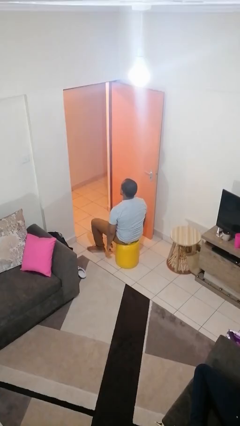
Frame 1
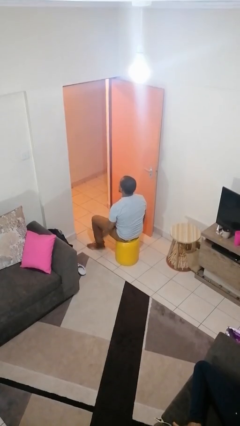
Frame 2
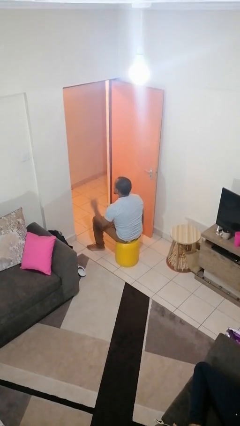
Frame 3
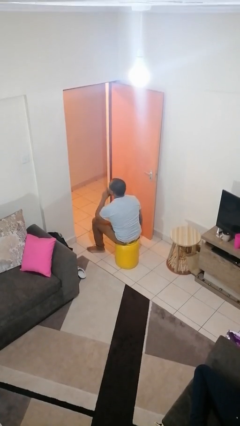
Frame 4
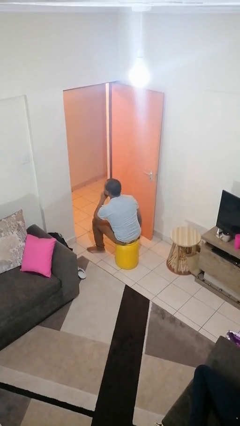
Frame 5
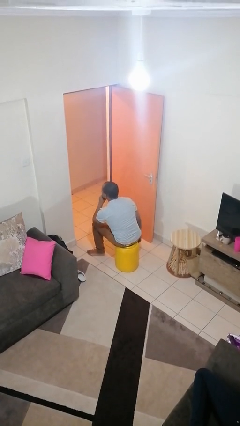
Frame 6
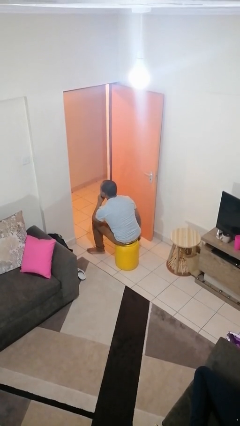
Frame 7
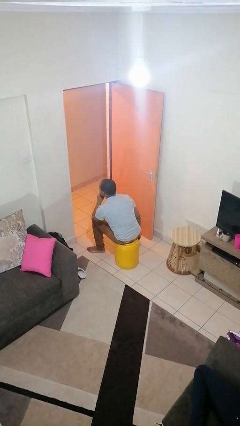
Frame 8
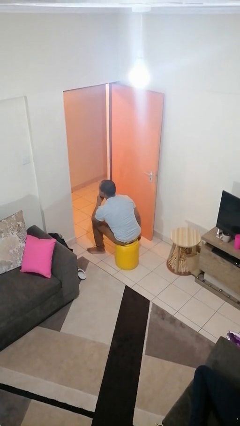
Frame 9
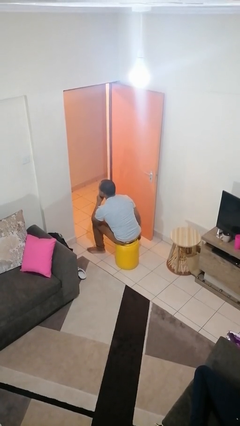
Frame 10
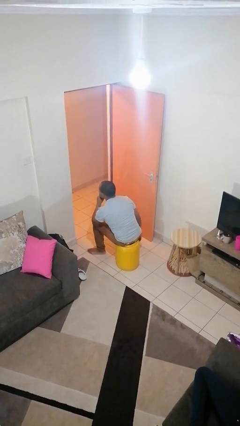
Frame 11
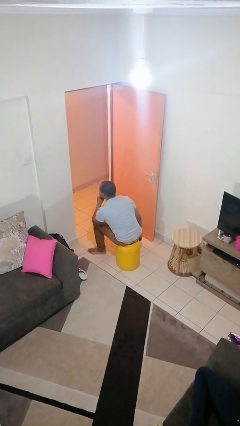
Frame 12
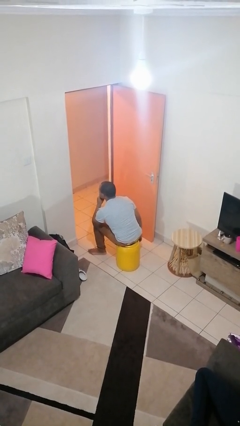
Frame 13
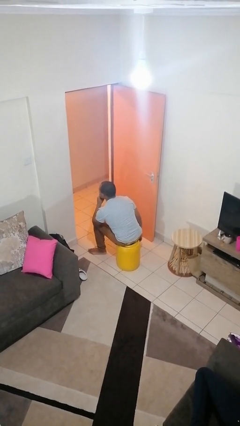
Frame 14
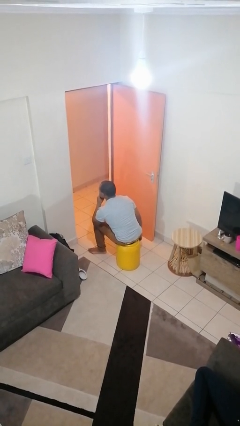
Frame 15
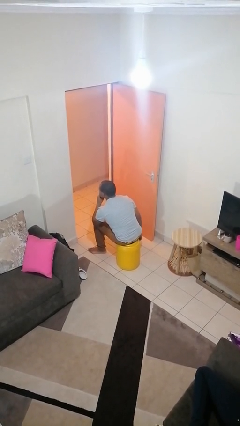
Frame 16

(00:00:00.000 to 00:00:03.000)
person gestures be quiet

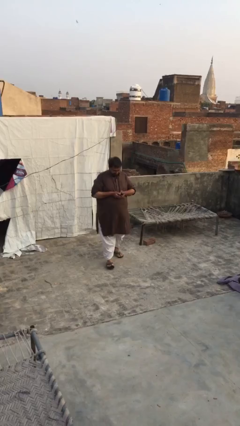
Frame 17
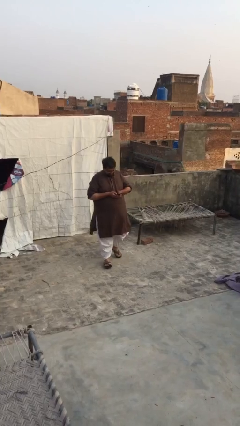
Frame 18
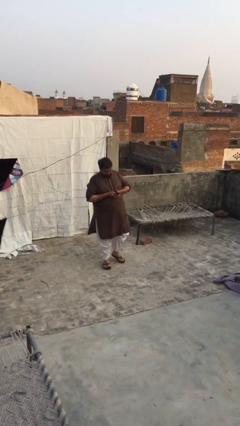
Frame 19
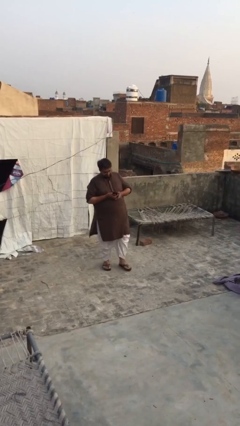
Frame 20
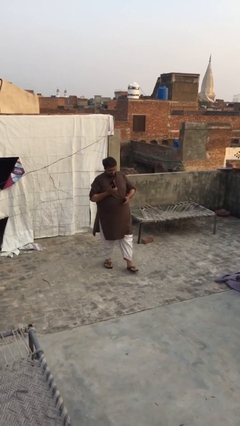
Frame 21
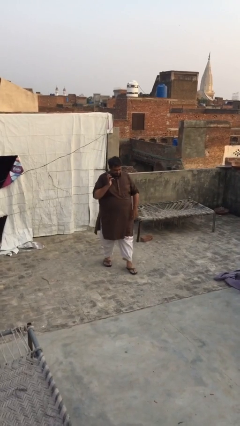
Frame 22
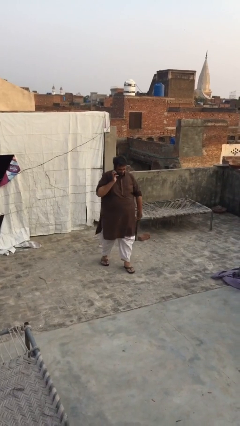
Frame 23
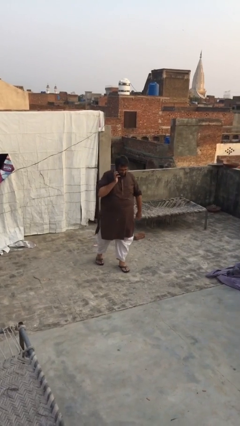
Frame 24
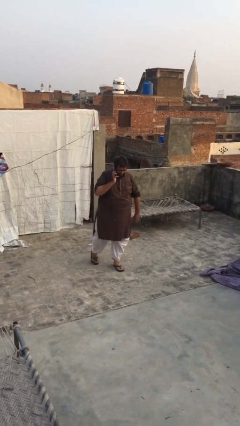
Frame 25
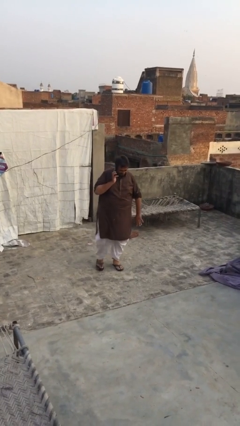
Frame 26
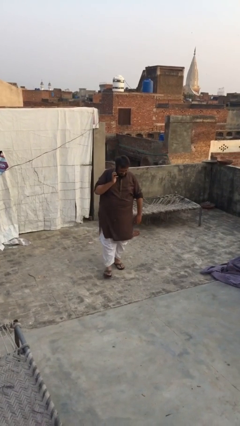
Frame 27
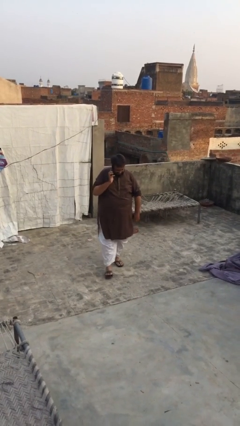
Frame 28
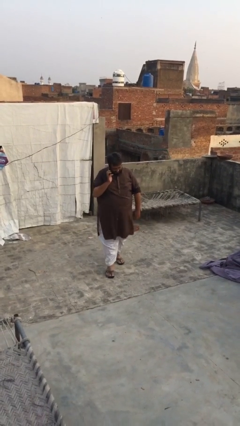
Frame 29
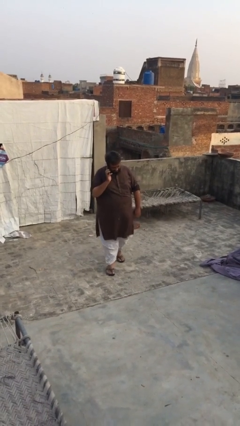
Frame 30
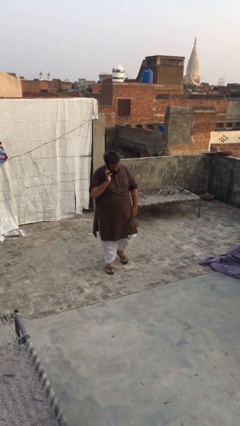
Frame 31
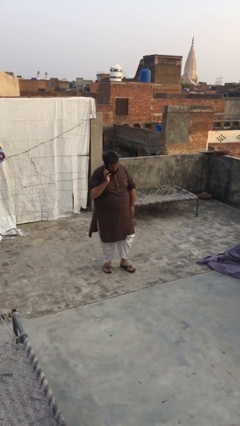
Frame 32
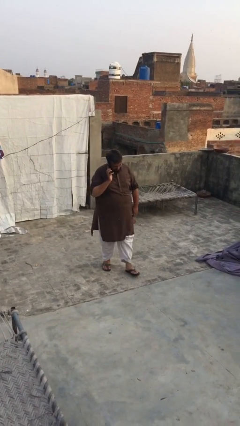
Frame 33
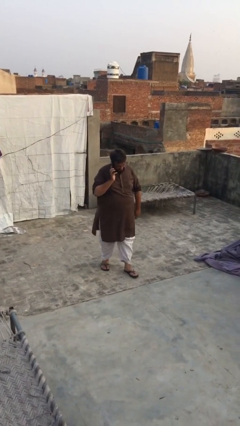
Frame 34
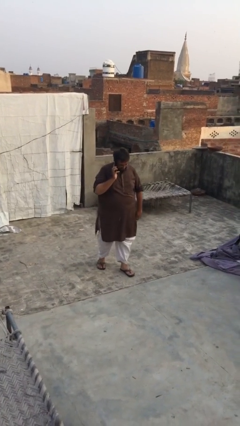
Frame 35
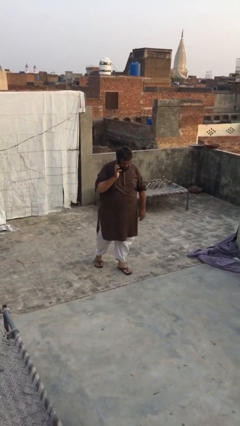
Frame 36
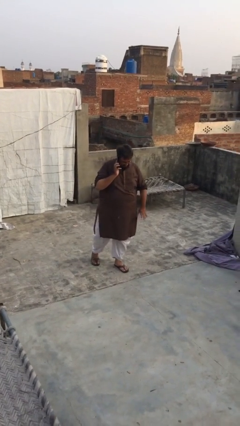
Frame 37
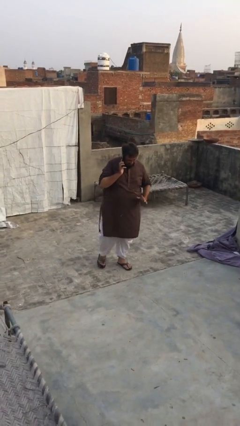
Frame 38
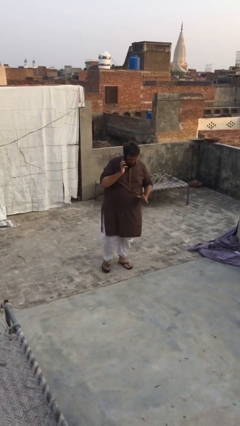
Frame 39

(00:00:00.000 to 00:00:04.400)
person talks on phone

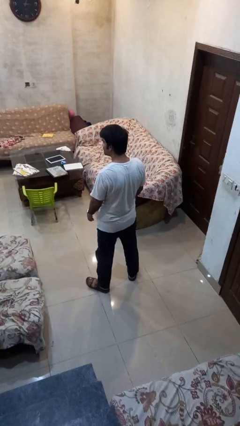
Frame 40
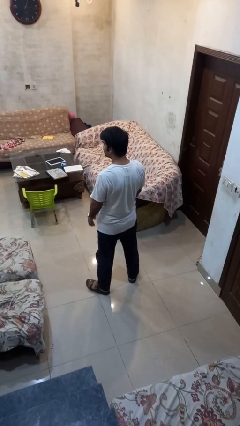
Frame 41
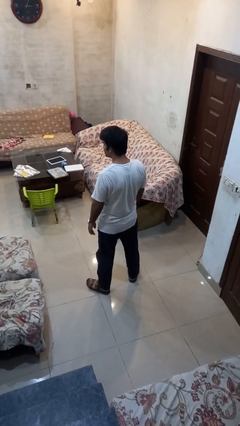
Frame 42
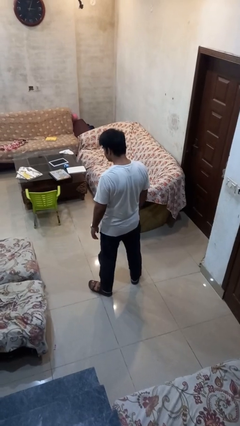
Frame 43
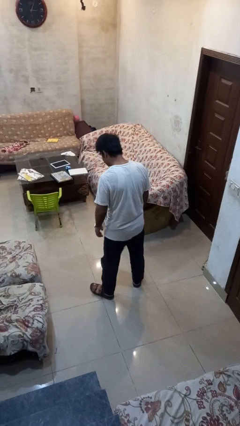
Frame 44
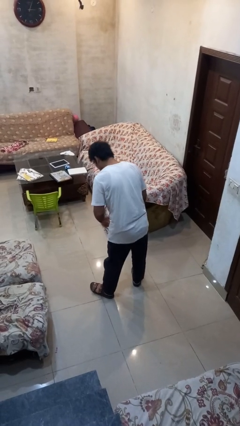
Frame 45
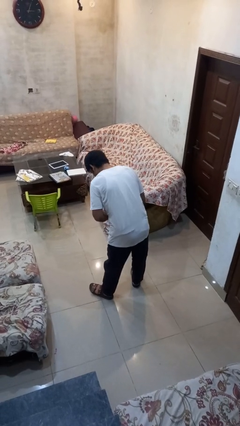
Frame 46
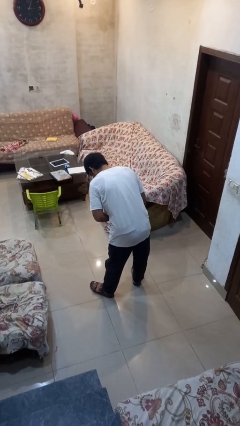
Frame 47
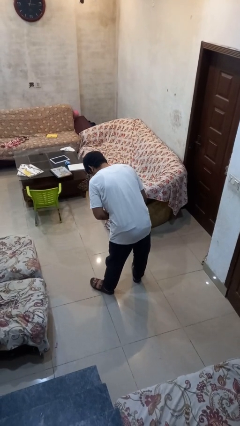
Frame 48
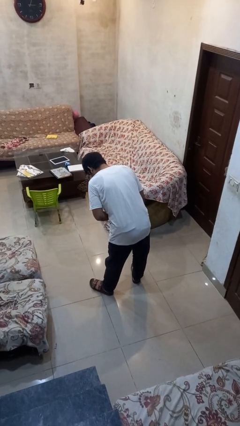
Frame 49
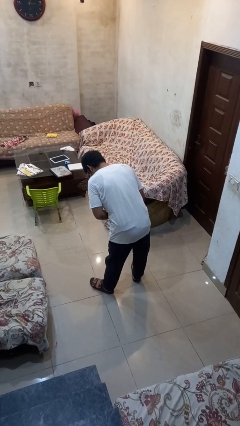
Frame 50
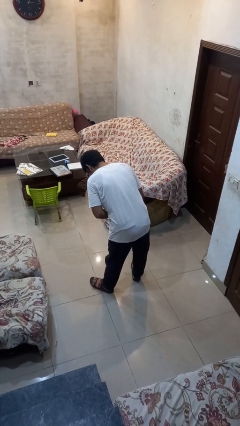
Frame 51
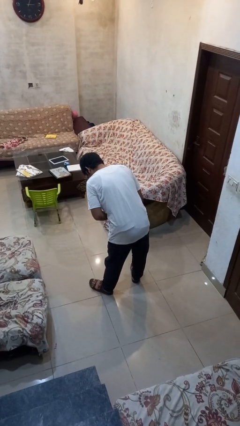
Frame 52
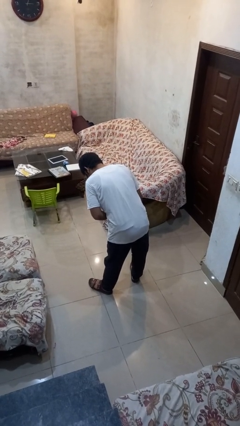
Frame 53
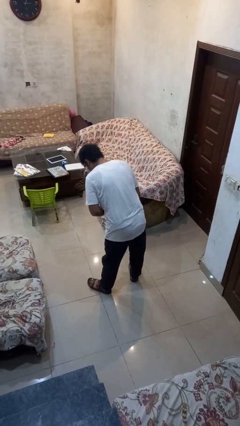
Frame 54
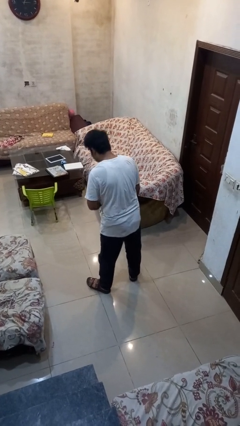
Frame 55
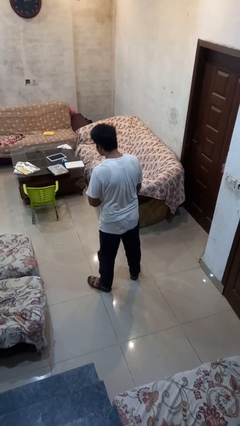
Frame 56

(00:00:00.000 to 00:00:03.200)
person bows

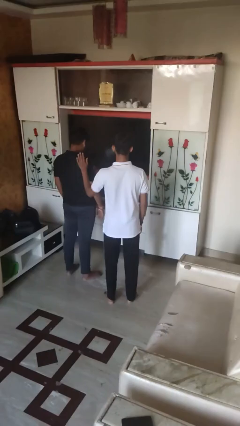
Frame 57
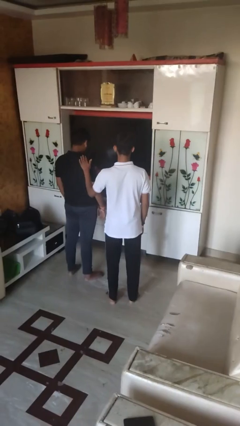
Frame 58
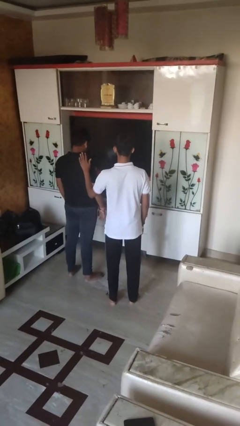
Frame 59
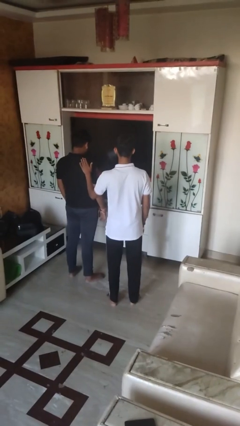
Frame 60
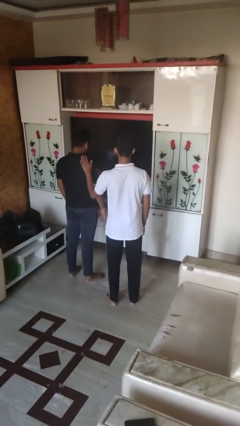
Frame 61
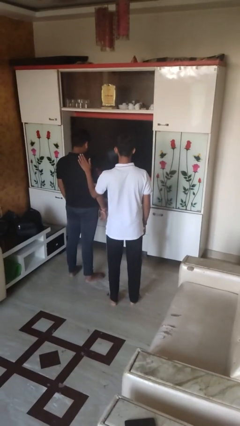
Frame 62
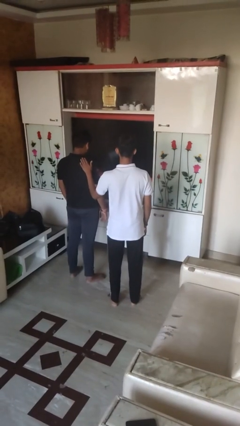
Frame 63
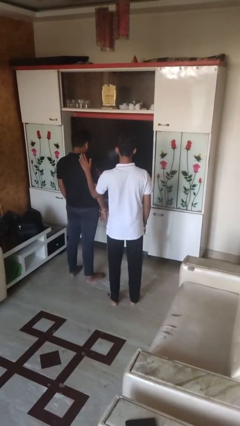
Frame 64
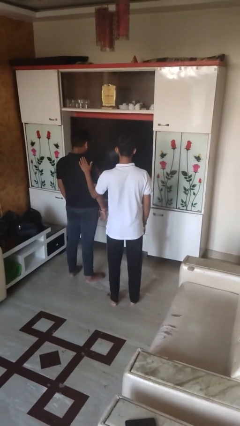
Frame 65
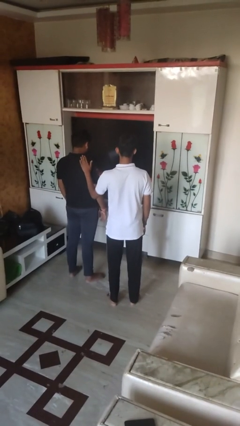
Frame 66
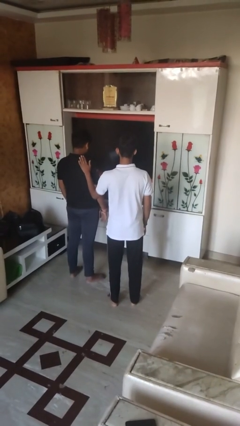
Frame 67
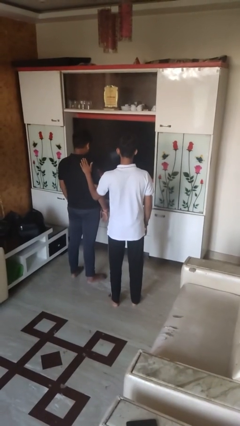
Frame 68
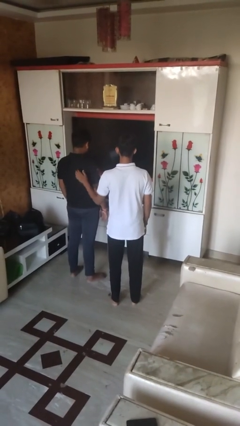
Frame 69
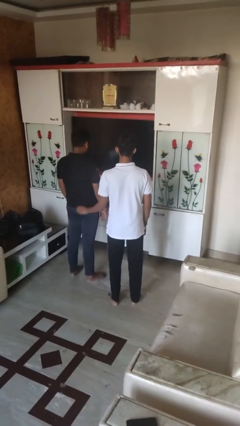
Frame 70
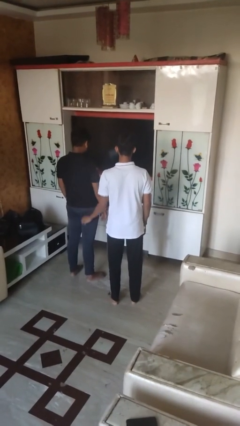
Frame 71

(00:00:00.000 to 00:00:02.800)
person pounds shoulders of person

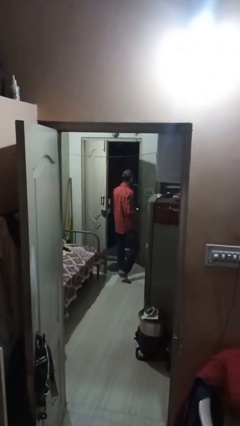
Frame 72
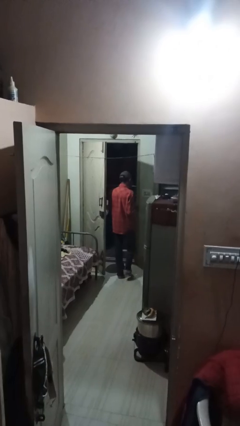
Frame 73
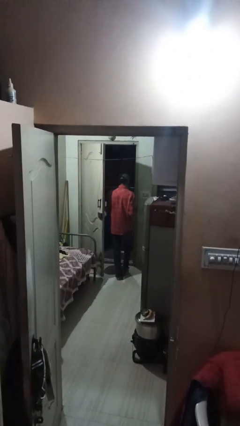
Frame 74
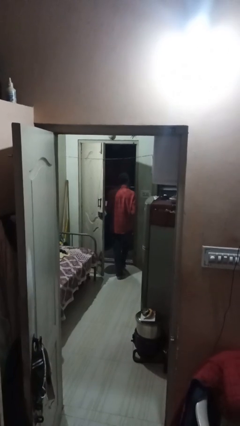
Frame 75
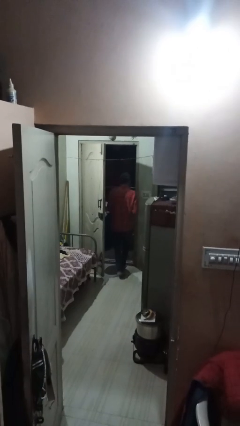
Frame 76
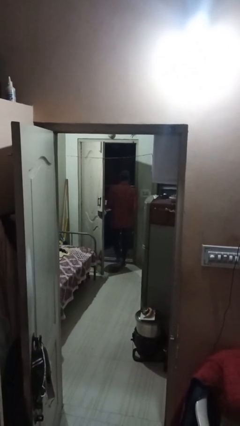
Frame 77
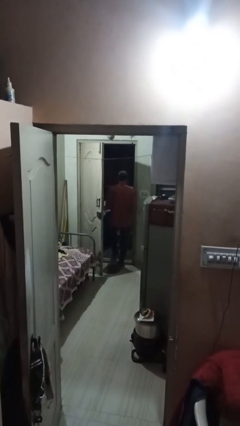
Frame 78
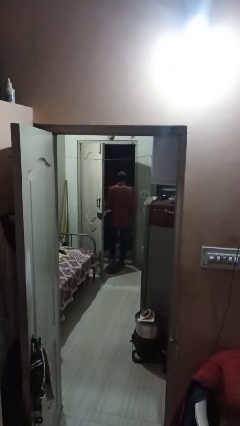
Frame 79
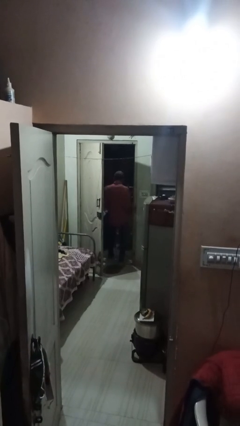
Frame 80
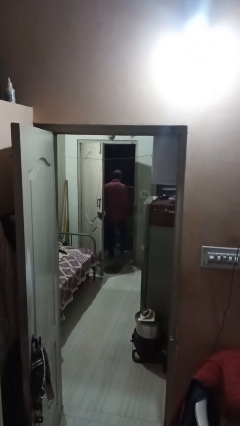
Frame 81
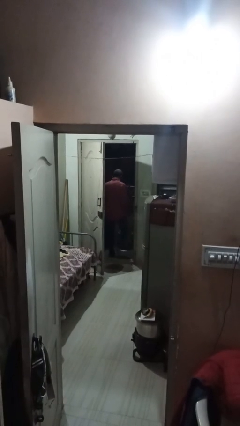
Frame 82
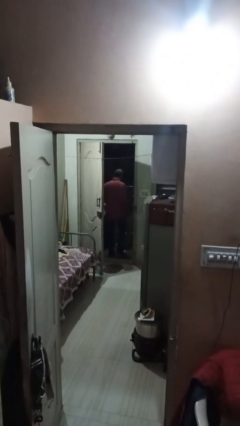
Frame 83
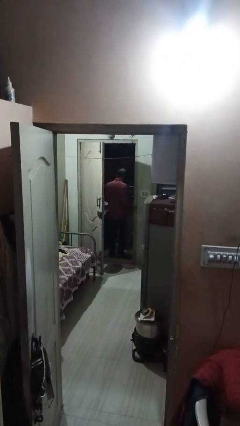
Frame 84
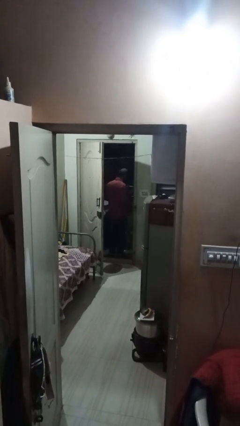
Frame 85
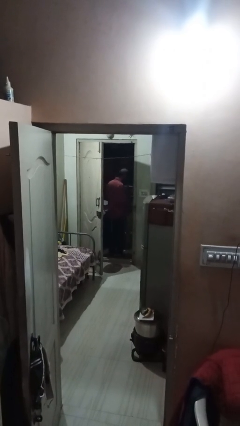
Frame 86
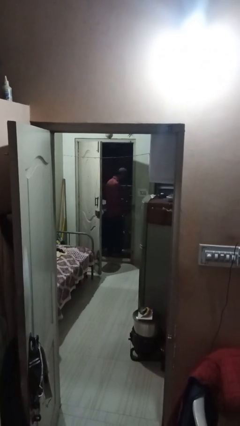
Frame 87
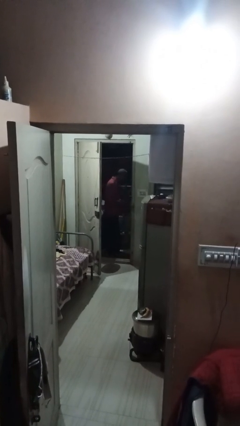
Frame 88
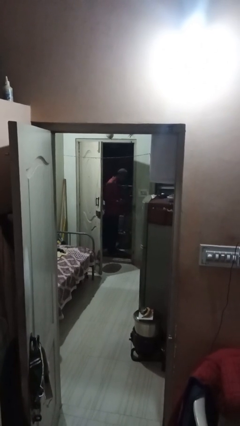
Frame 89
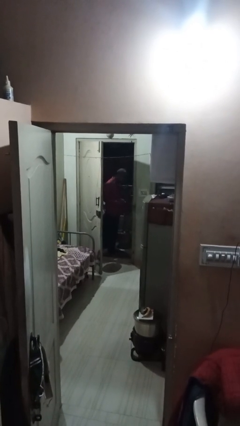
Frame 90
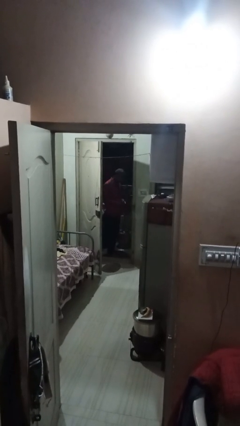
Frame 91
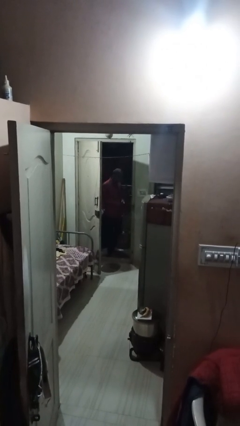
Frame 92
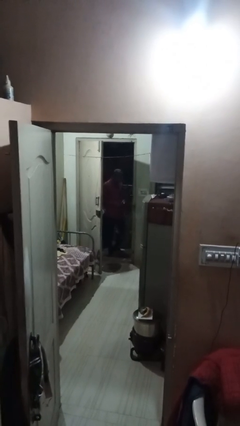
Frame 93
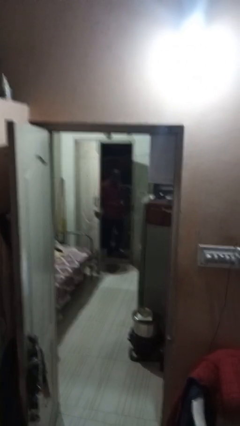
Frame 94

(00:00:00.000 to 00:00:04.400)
person exits scene through structure
